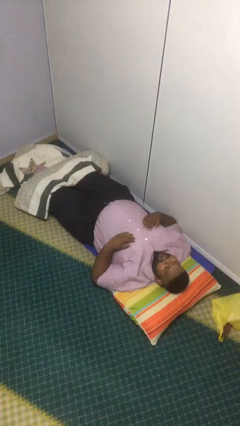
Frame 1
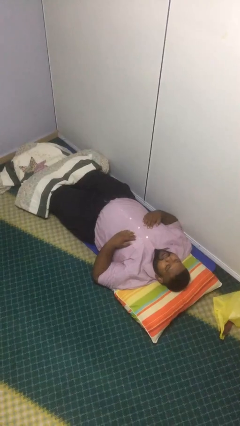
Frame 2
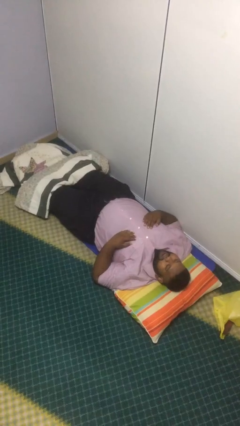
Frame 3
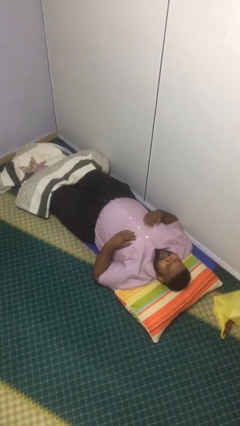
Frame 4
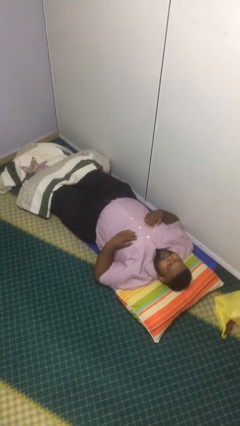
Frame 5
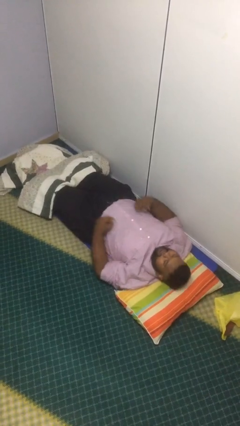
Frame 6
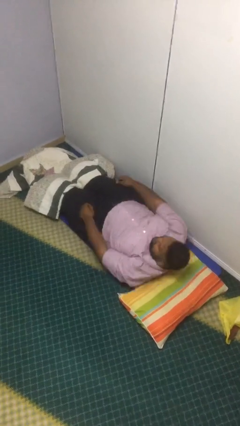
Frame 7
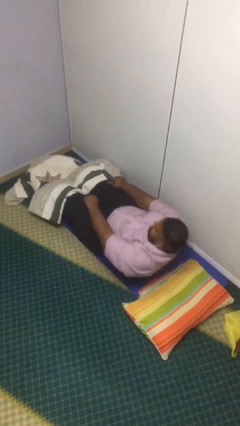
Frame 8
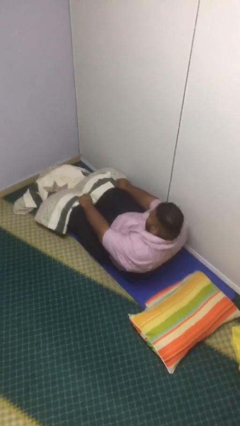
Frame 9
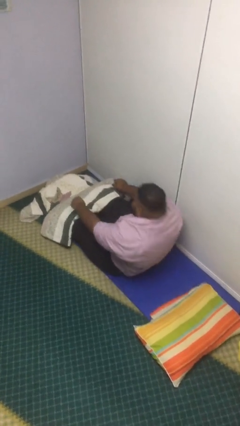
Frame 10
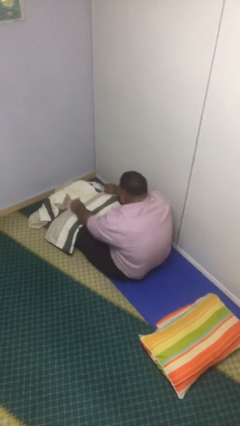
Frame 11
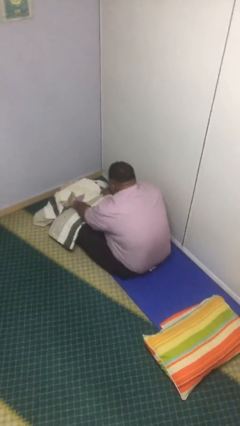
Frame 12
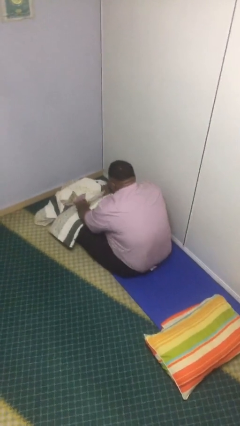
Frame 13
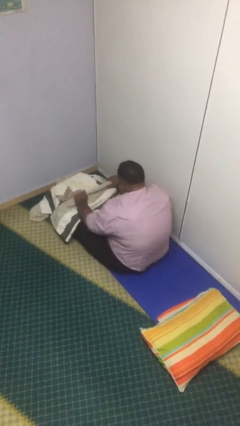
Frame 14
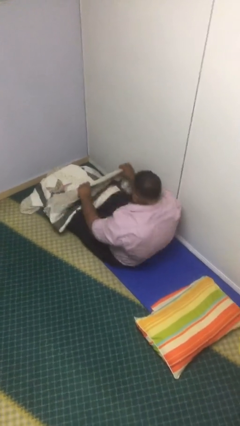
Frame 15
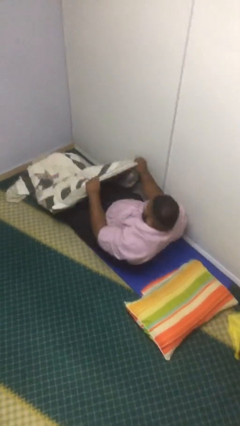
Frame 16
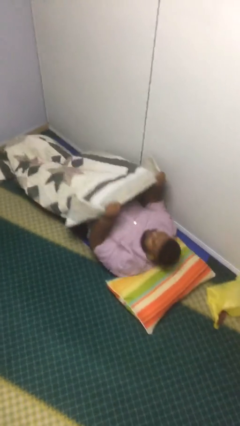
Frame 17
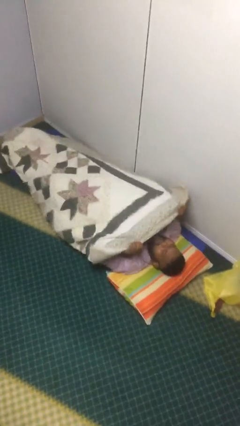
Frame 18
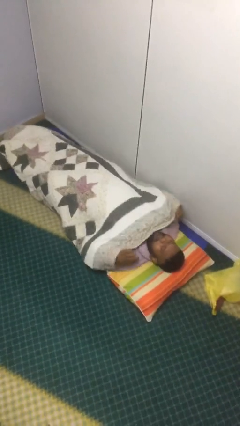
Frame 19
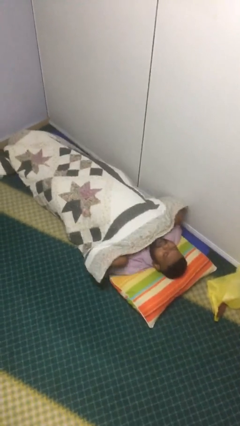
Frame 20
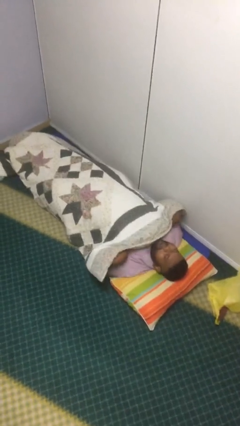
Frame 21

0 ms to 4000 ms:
person covers with bedsheets

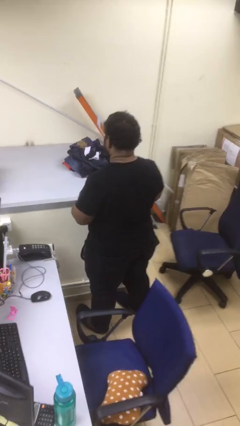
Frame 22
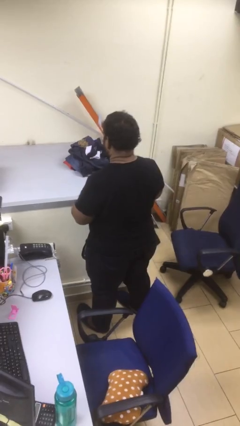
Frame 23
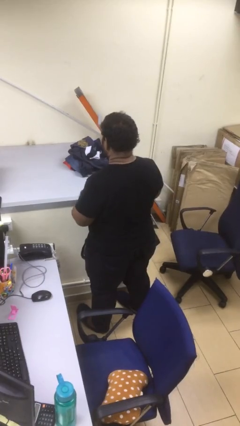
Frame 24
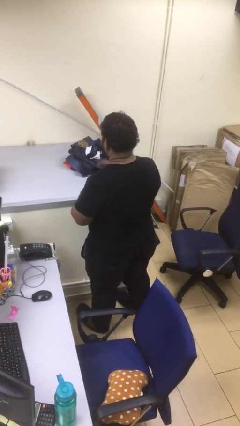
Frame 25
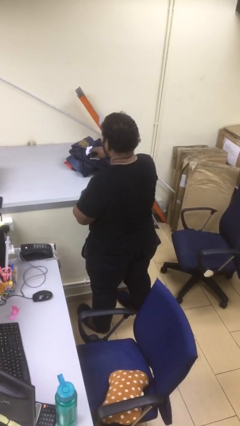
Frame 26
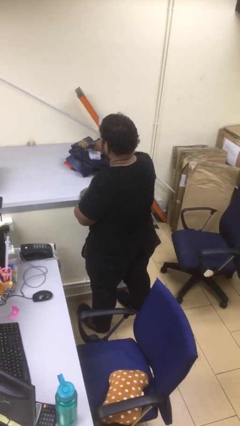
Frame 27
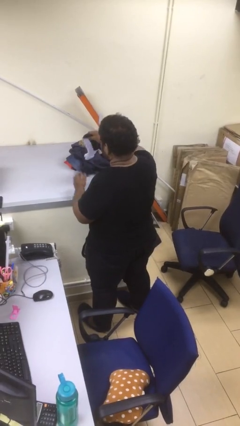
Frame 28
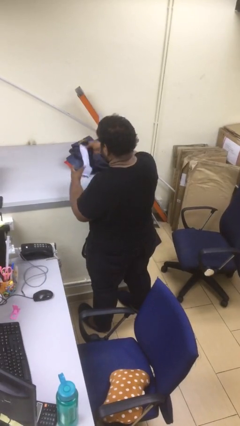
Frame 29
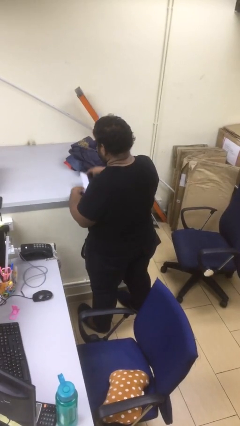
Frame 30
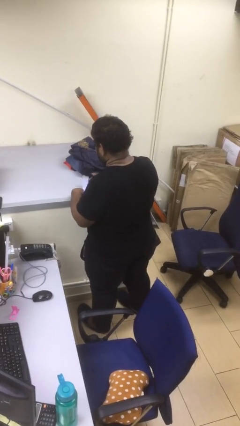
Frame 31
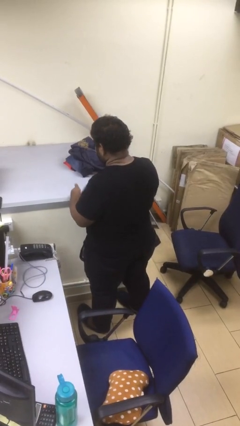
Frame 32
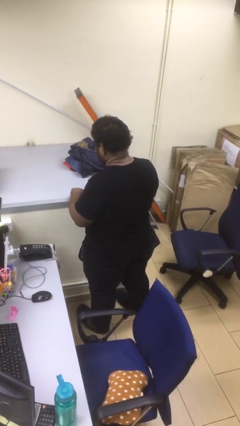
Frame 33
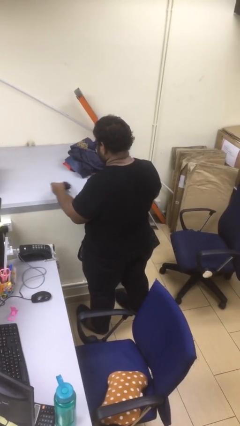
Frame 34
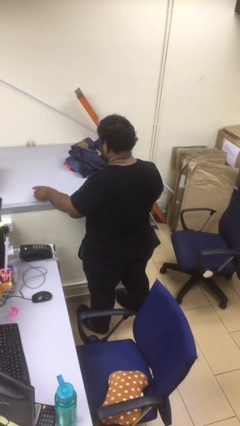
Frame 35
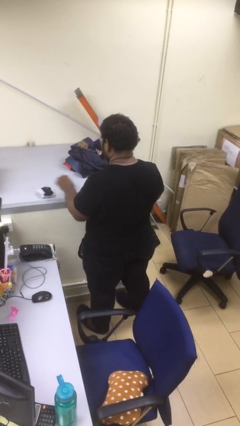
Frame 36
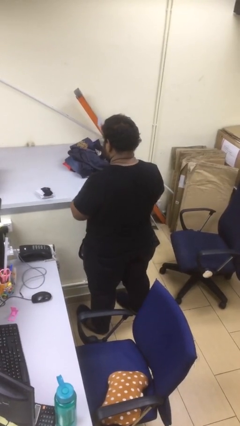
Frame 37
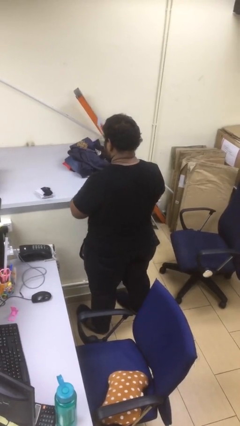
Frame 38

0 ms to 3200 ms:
person folds socks

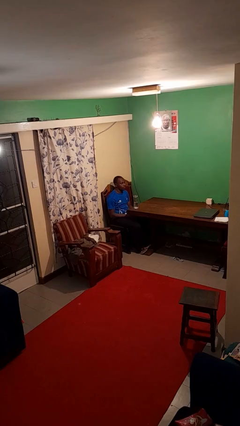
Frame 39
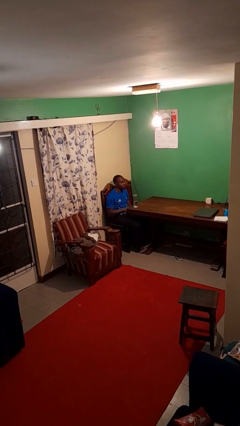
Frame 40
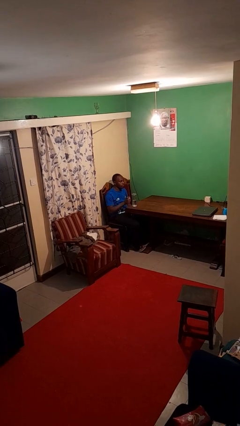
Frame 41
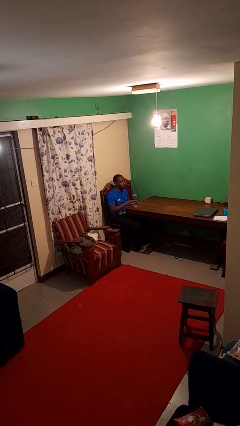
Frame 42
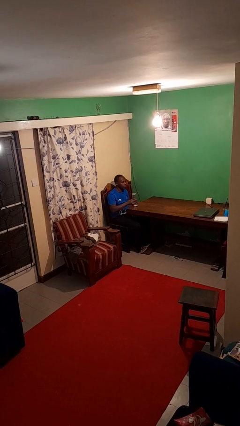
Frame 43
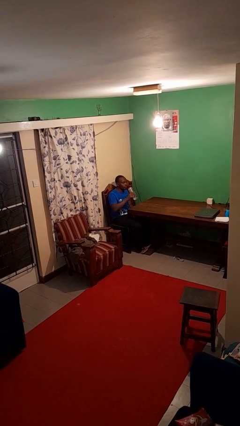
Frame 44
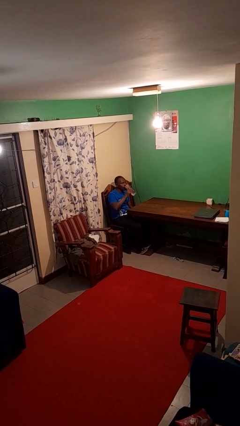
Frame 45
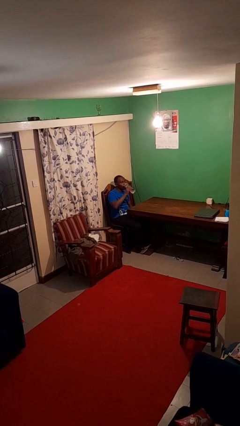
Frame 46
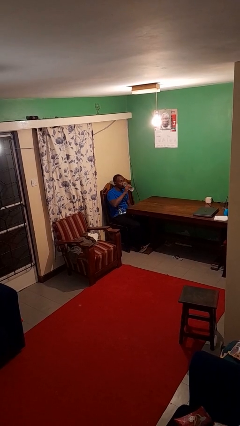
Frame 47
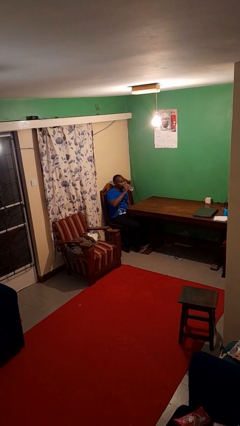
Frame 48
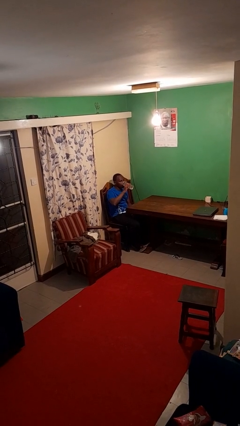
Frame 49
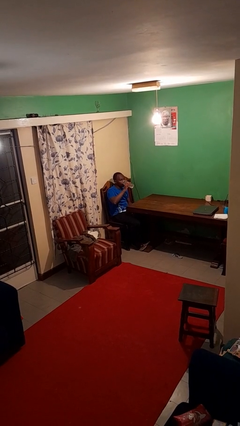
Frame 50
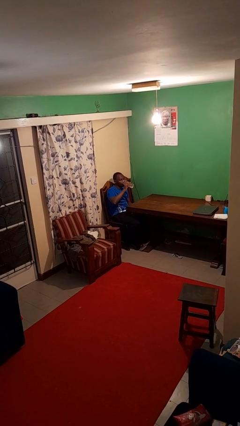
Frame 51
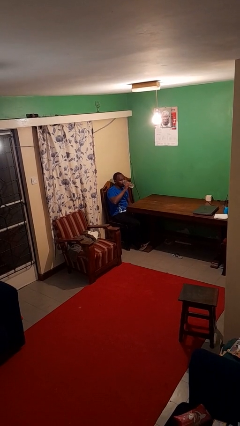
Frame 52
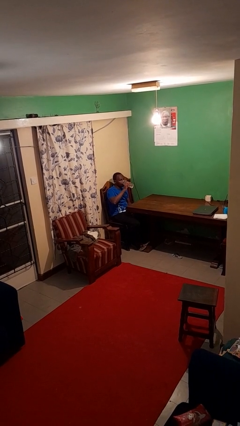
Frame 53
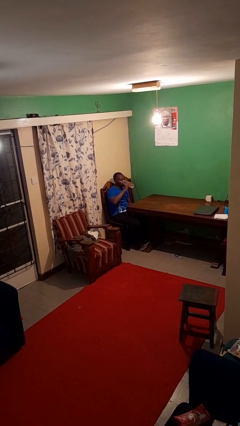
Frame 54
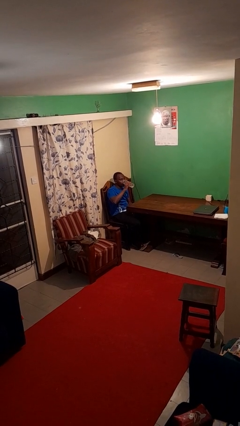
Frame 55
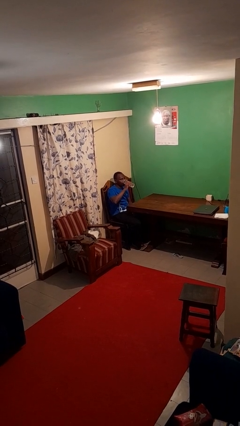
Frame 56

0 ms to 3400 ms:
person drinks from bottle

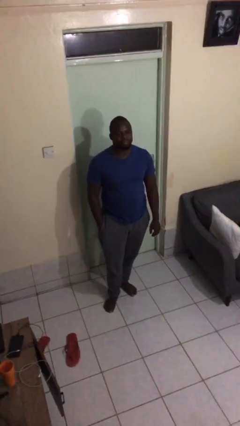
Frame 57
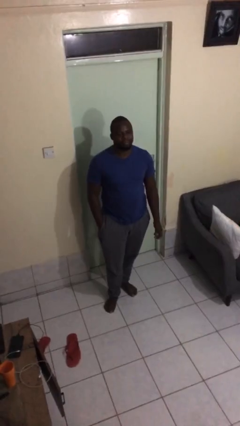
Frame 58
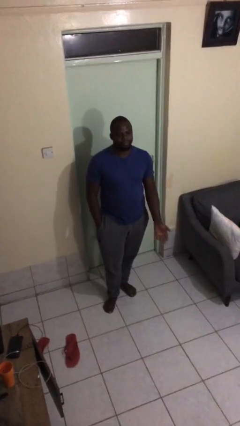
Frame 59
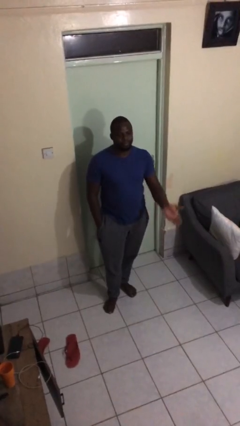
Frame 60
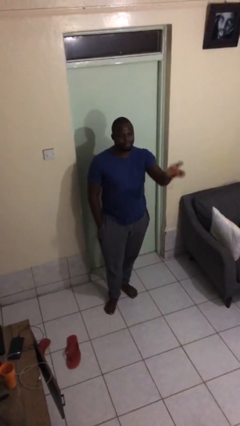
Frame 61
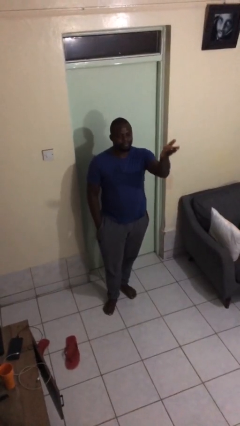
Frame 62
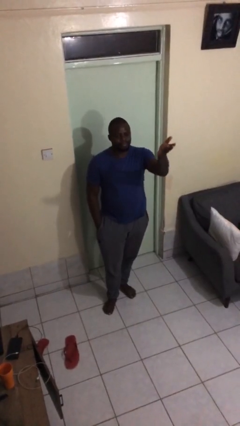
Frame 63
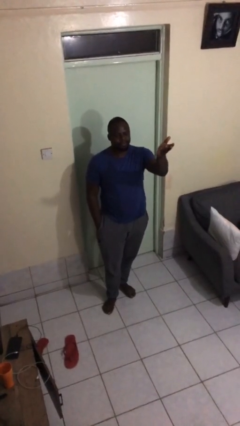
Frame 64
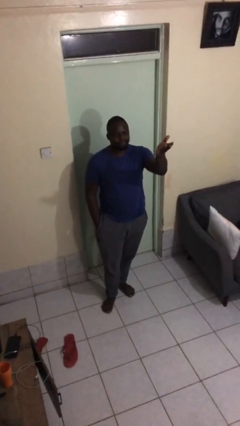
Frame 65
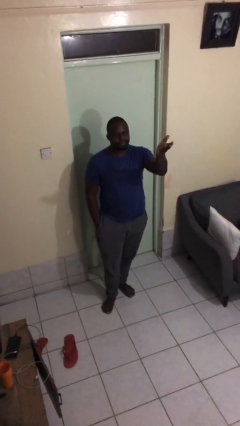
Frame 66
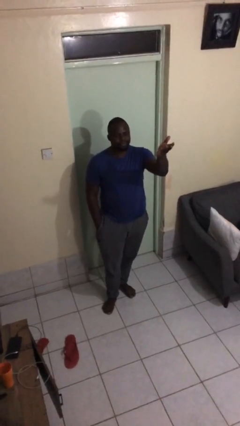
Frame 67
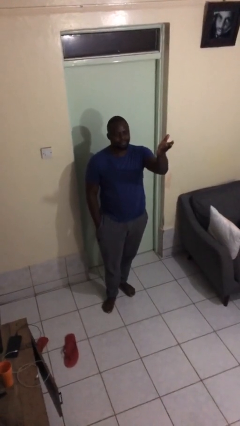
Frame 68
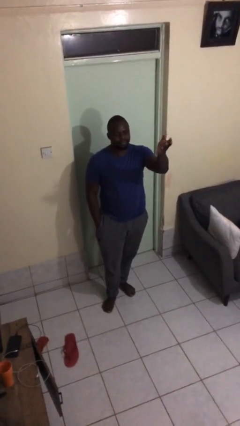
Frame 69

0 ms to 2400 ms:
person gestures swipe up

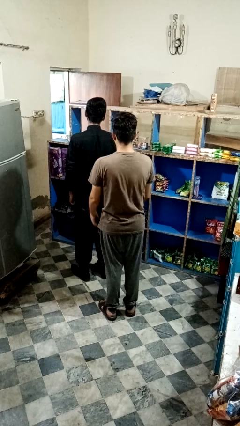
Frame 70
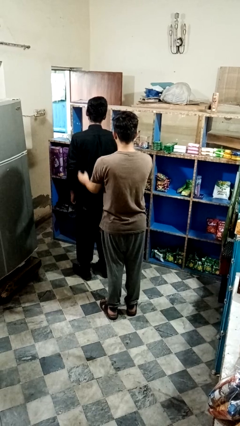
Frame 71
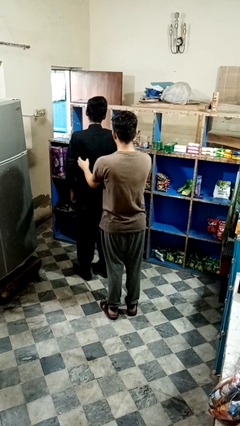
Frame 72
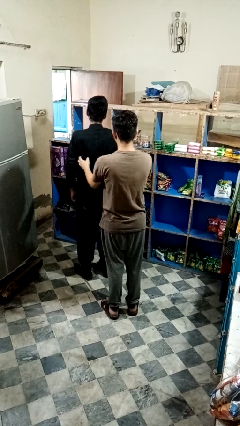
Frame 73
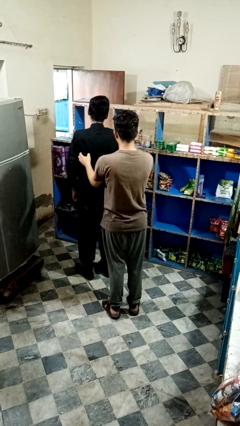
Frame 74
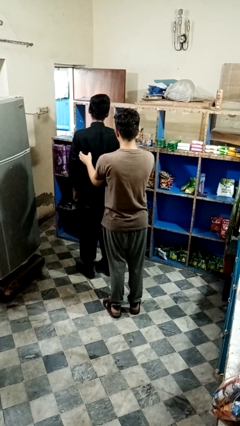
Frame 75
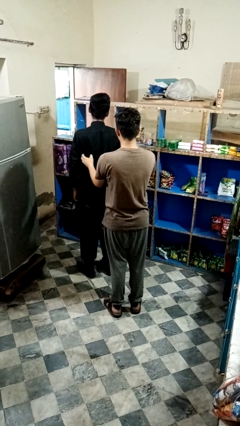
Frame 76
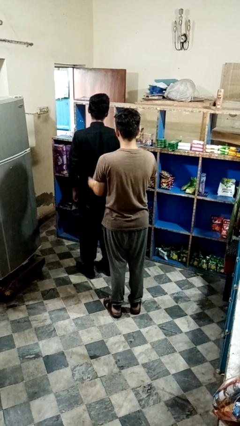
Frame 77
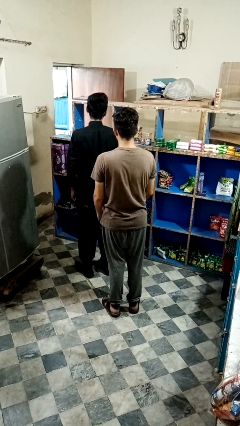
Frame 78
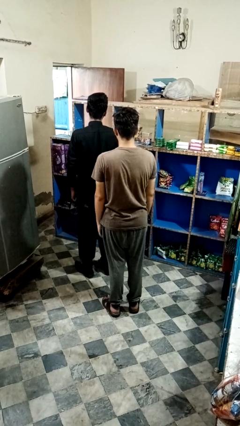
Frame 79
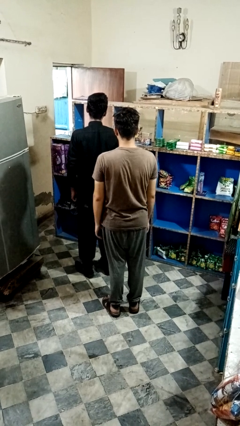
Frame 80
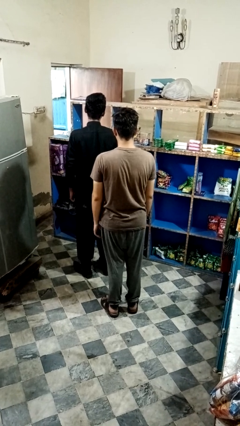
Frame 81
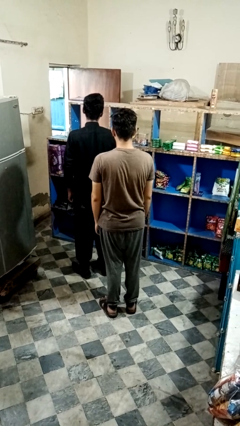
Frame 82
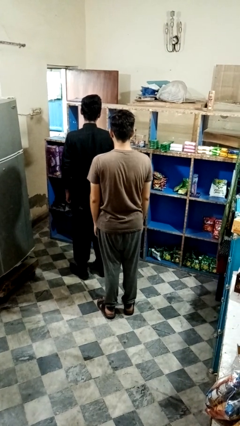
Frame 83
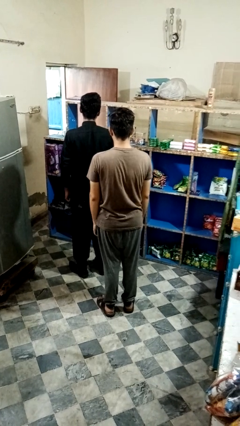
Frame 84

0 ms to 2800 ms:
person tickles person

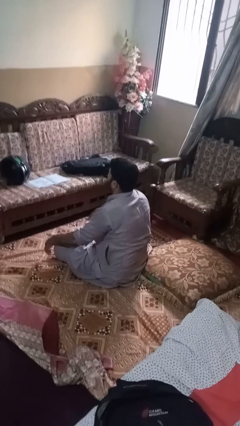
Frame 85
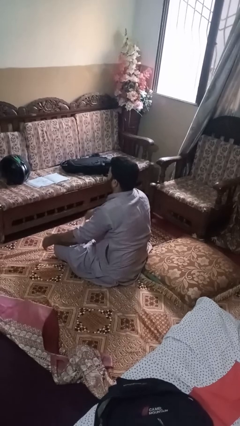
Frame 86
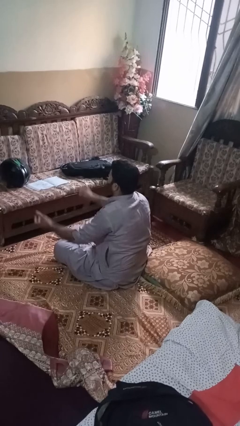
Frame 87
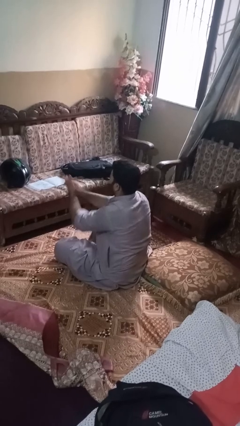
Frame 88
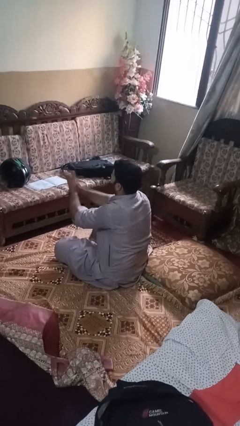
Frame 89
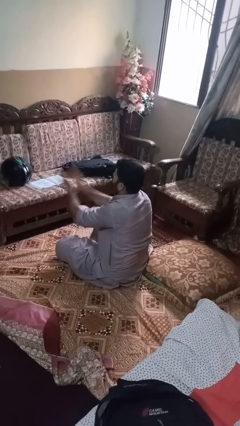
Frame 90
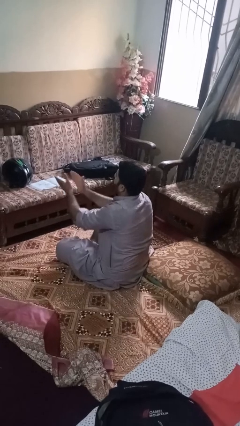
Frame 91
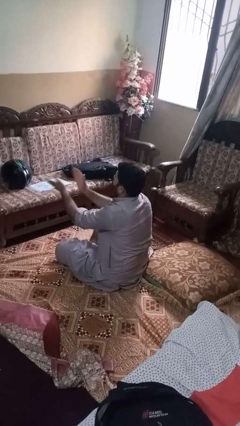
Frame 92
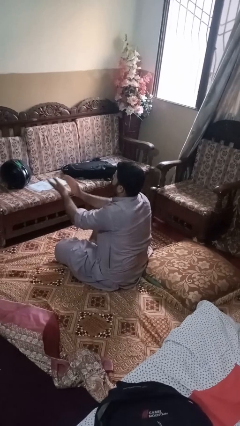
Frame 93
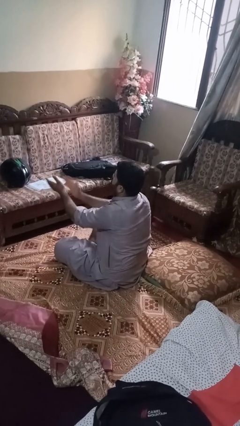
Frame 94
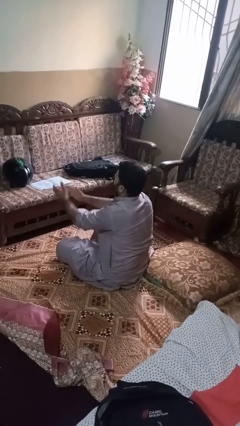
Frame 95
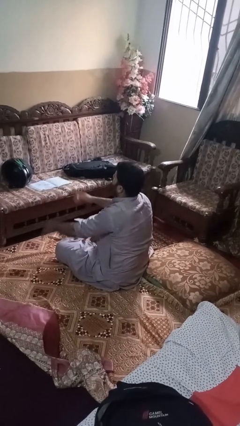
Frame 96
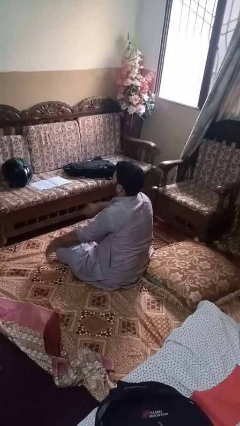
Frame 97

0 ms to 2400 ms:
person claps hands
